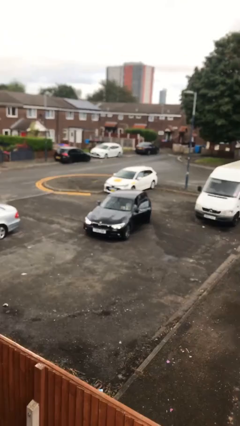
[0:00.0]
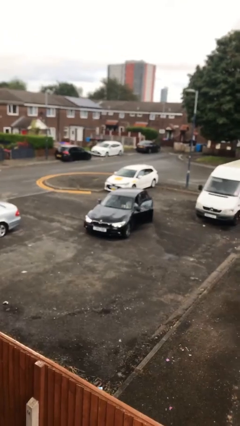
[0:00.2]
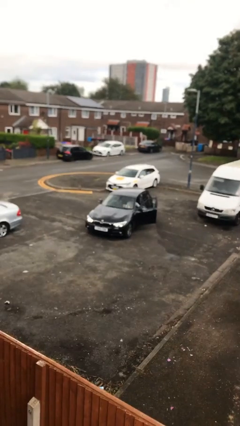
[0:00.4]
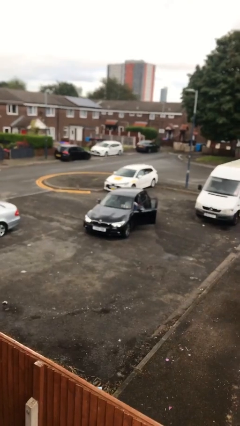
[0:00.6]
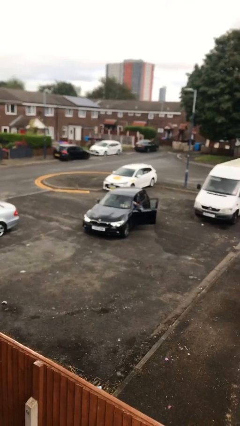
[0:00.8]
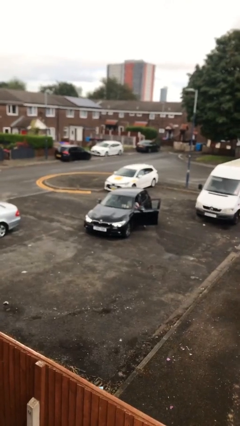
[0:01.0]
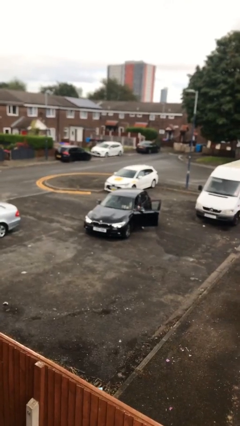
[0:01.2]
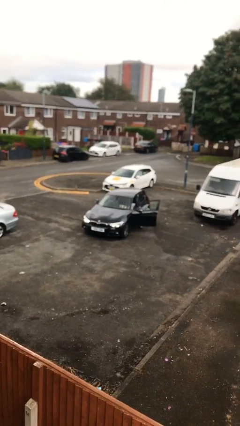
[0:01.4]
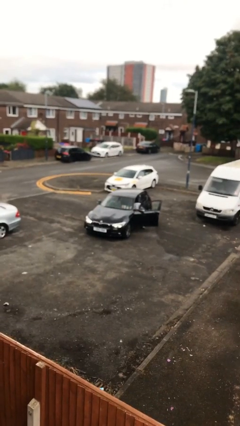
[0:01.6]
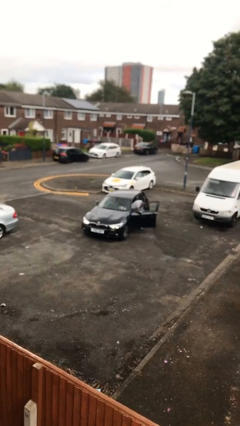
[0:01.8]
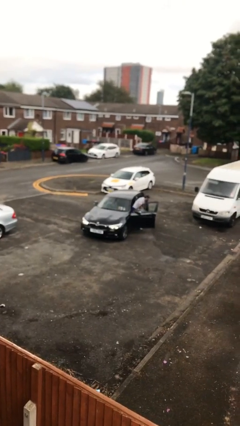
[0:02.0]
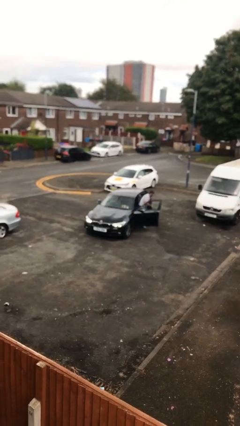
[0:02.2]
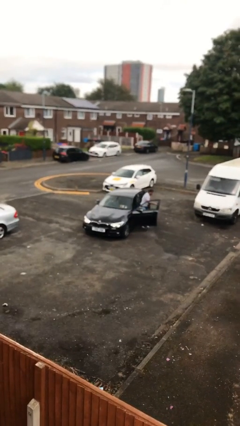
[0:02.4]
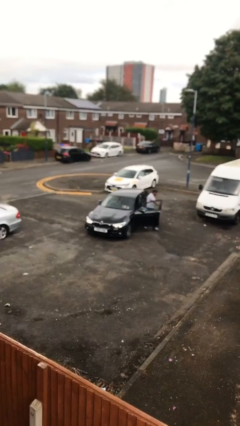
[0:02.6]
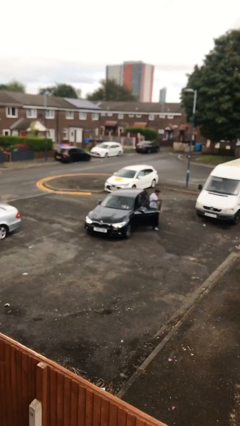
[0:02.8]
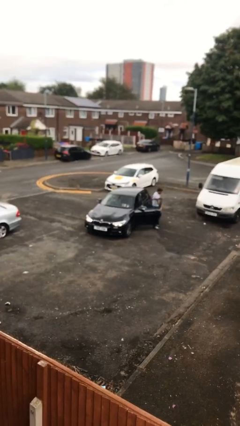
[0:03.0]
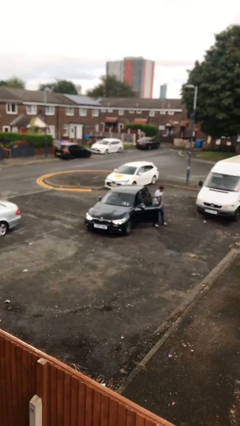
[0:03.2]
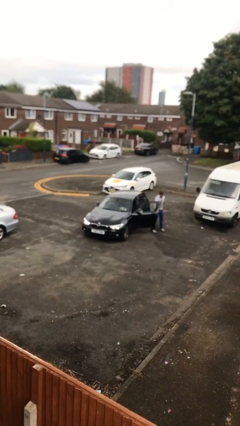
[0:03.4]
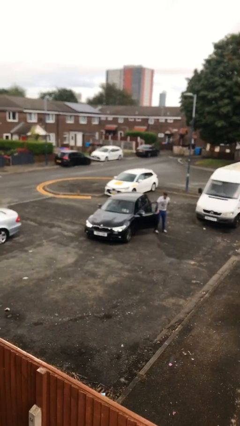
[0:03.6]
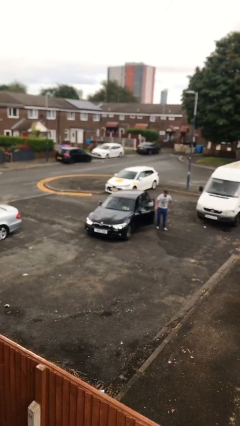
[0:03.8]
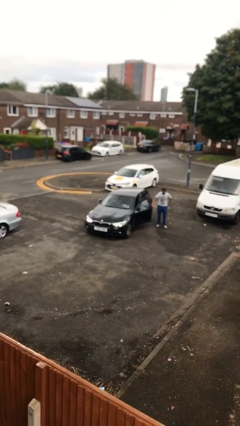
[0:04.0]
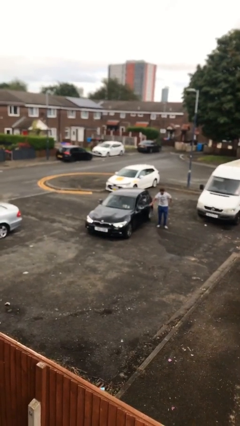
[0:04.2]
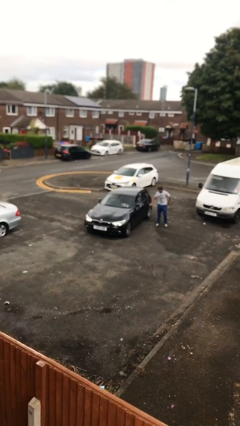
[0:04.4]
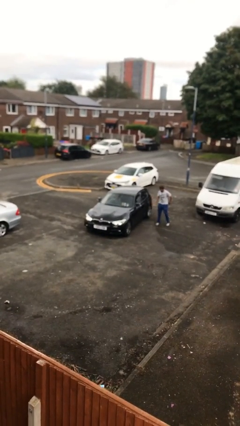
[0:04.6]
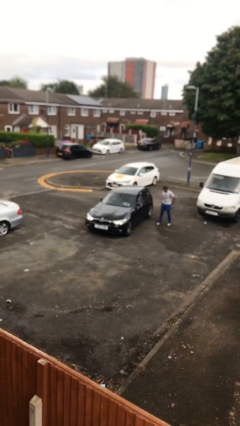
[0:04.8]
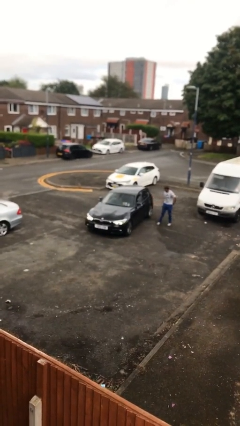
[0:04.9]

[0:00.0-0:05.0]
car drops off person

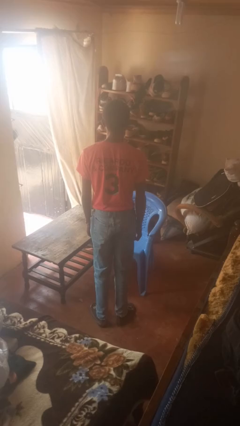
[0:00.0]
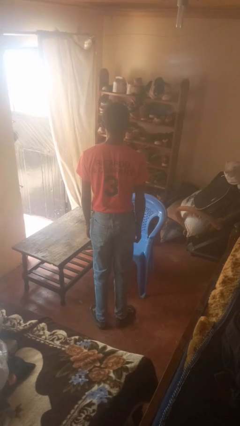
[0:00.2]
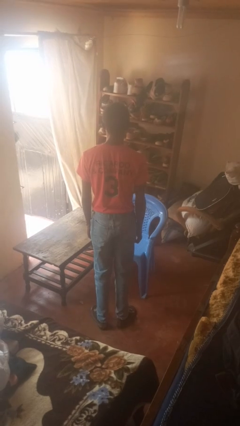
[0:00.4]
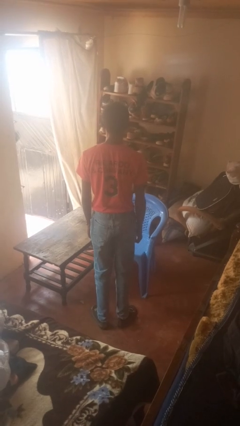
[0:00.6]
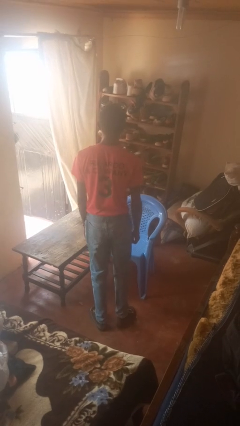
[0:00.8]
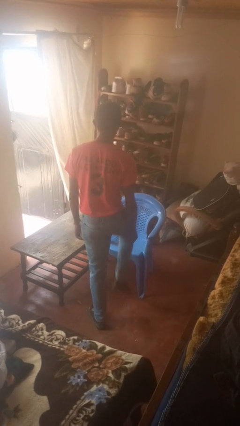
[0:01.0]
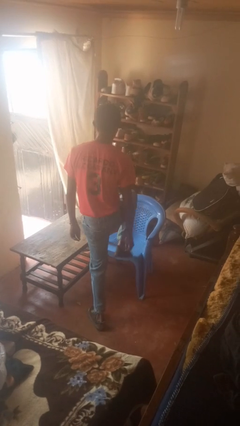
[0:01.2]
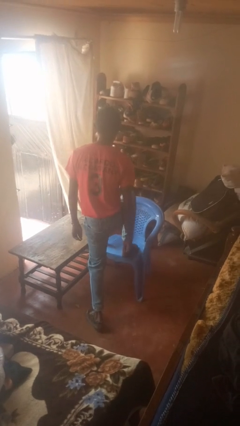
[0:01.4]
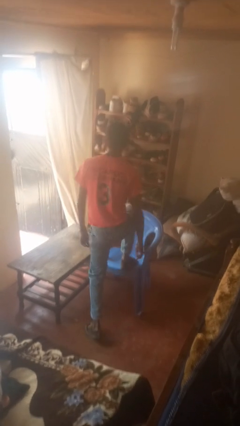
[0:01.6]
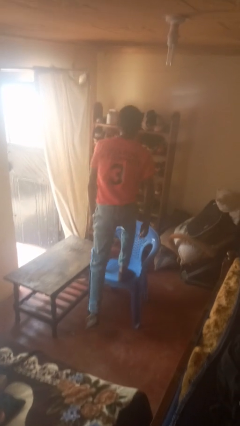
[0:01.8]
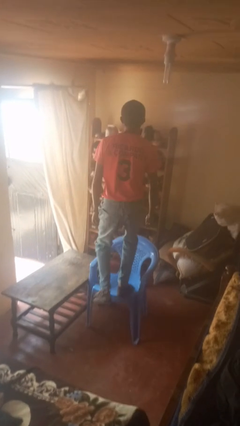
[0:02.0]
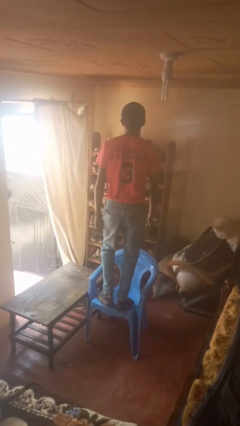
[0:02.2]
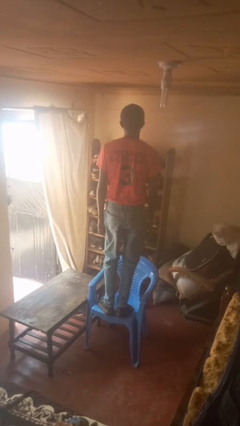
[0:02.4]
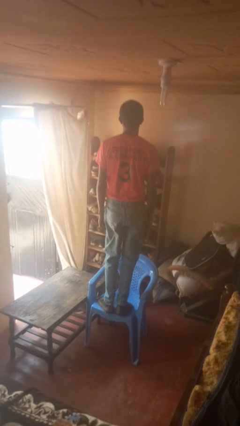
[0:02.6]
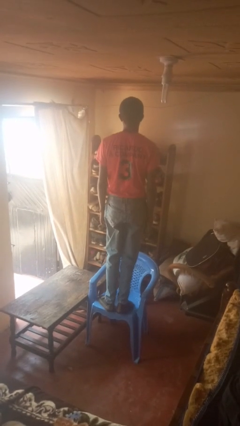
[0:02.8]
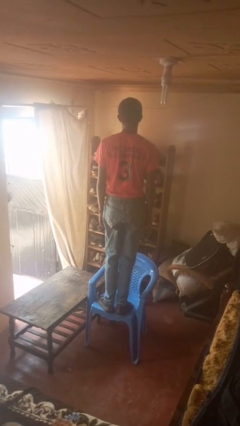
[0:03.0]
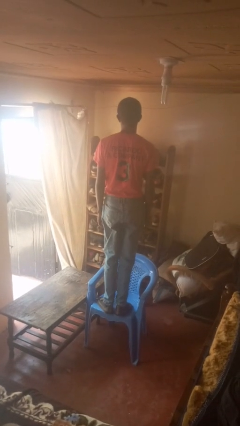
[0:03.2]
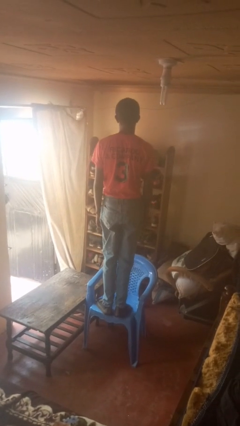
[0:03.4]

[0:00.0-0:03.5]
person climbs on chair

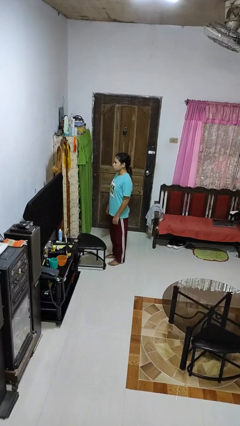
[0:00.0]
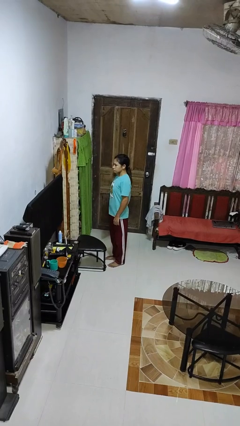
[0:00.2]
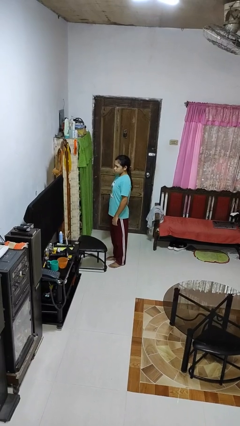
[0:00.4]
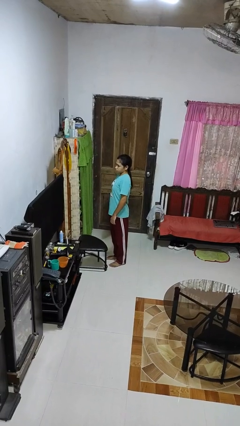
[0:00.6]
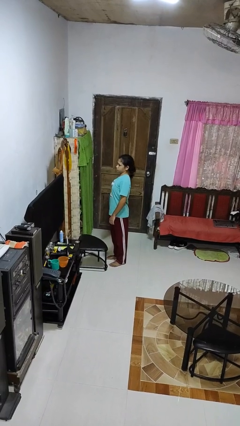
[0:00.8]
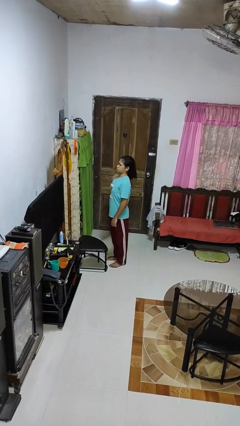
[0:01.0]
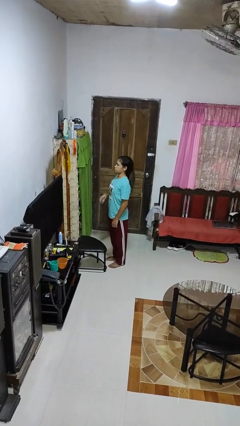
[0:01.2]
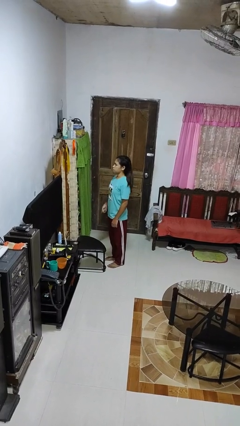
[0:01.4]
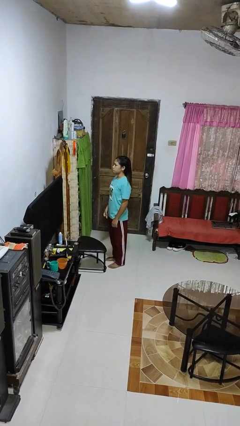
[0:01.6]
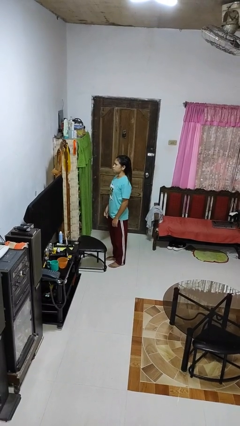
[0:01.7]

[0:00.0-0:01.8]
person takes off hairtie

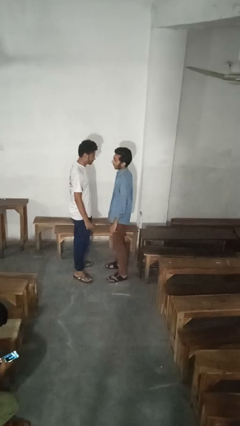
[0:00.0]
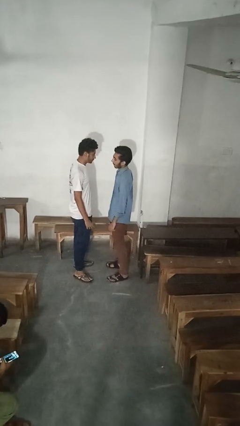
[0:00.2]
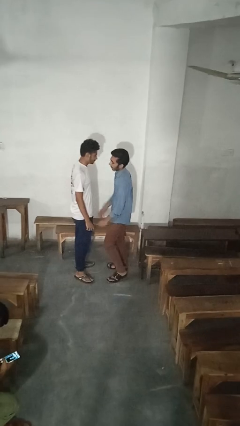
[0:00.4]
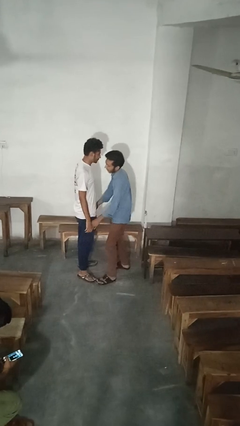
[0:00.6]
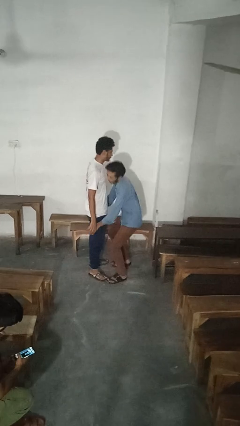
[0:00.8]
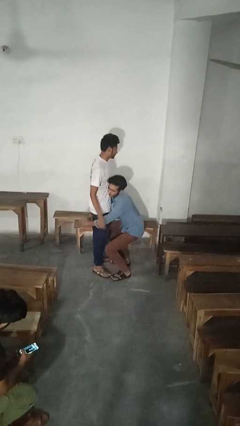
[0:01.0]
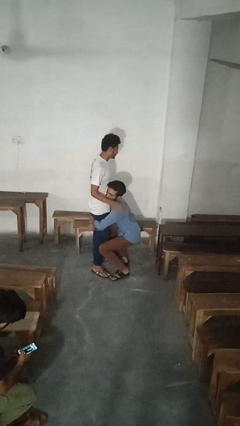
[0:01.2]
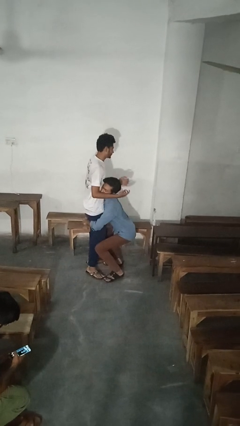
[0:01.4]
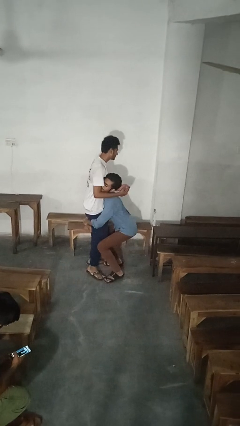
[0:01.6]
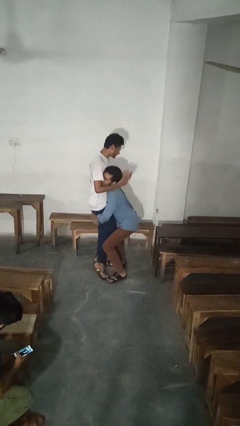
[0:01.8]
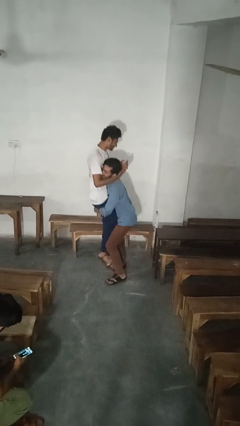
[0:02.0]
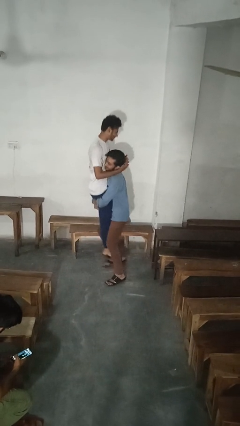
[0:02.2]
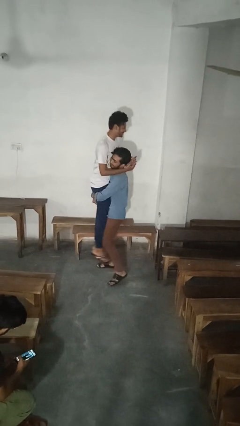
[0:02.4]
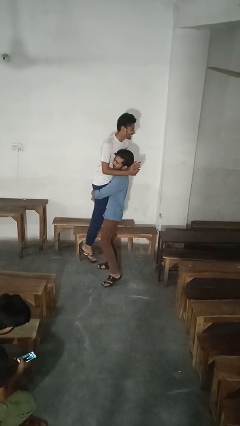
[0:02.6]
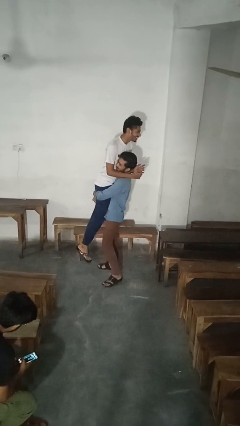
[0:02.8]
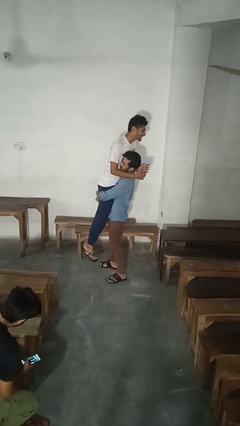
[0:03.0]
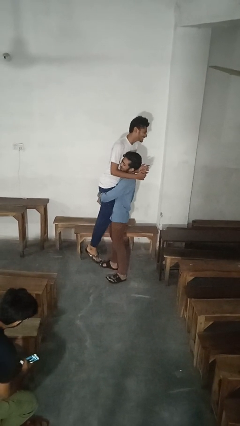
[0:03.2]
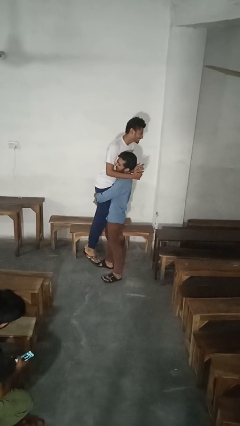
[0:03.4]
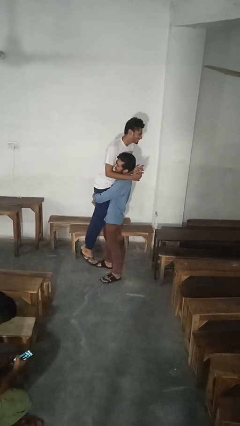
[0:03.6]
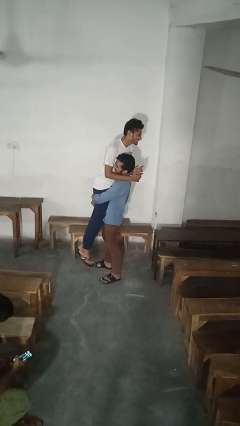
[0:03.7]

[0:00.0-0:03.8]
person picks up person

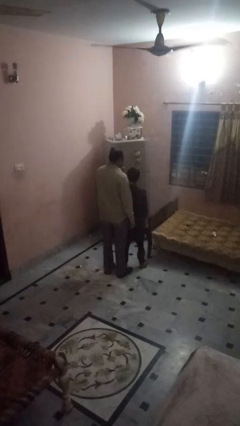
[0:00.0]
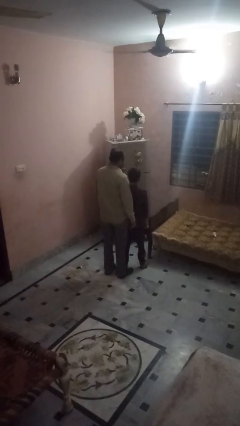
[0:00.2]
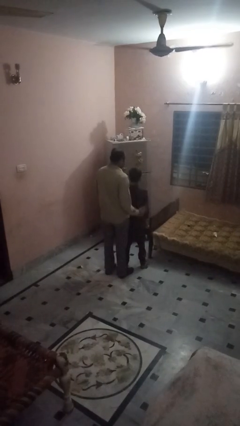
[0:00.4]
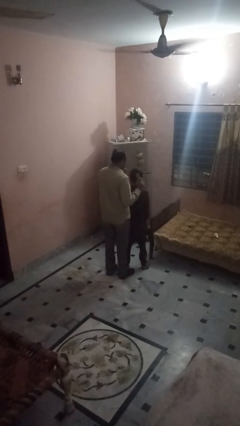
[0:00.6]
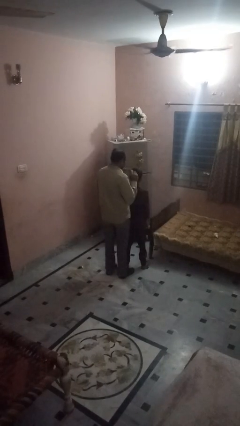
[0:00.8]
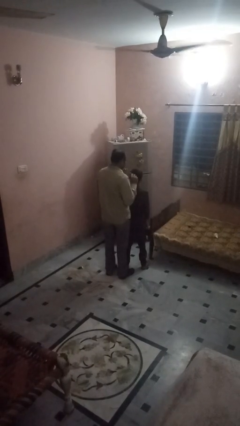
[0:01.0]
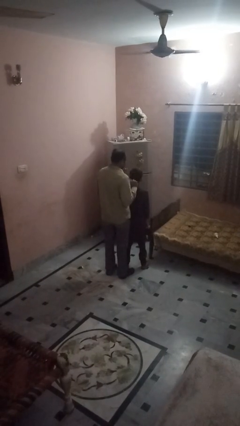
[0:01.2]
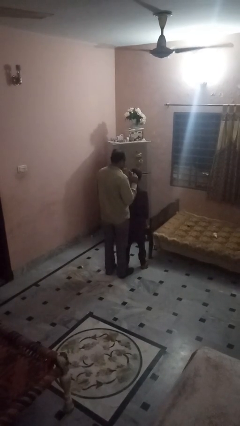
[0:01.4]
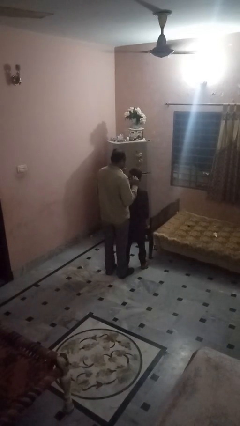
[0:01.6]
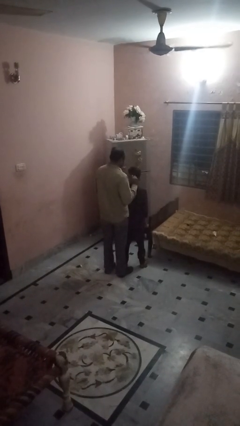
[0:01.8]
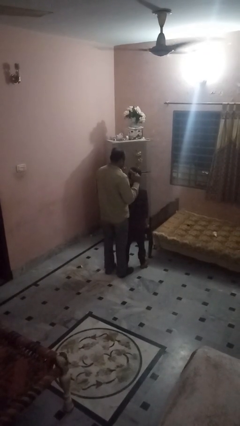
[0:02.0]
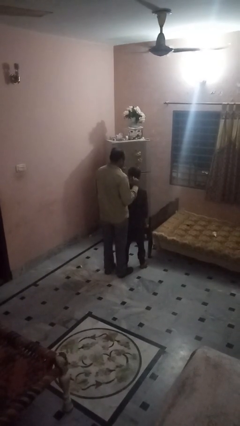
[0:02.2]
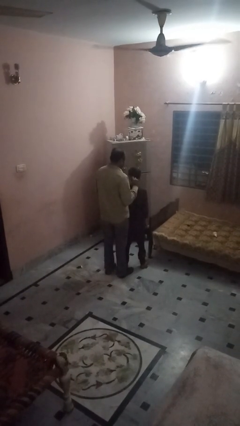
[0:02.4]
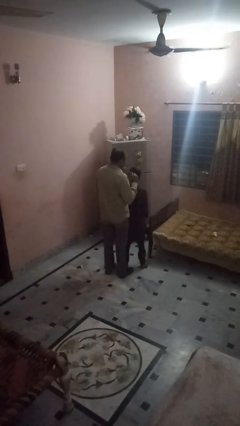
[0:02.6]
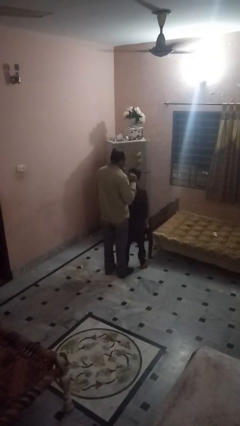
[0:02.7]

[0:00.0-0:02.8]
person brushes hair of person

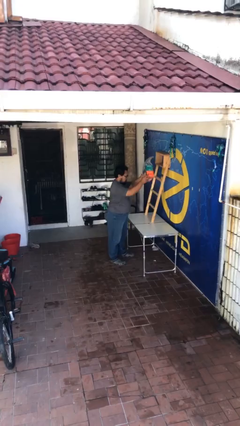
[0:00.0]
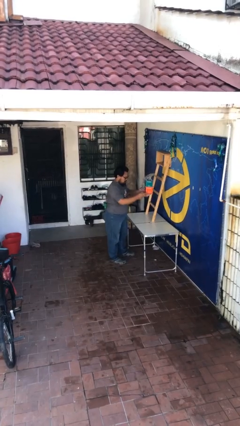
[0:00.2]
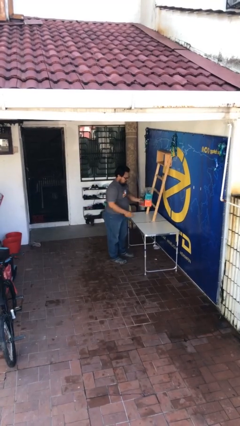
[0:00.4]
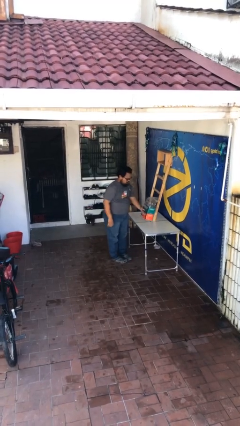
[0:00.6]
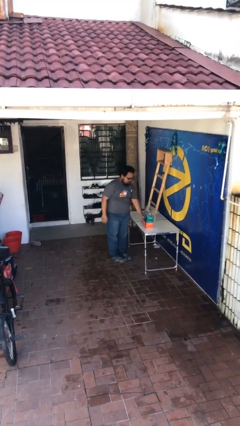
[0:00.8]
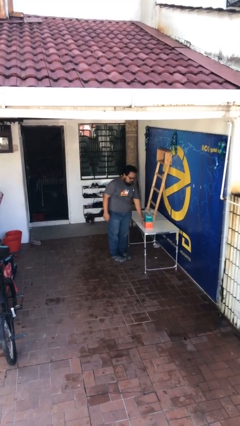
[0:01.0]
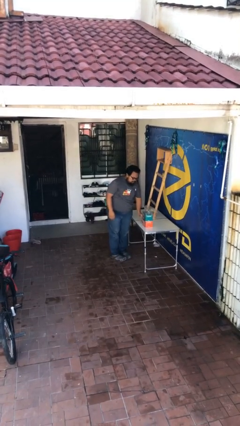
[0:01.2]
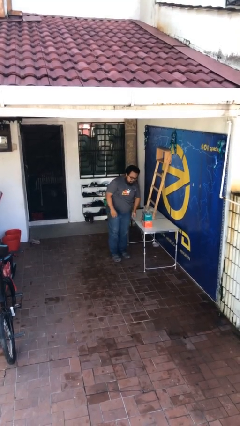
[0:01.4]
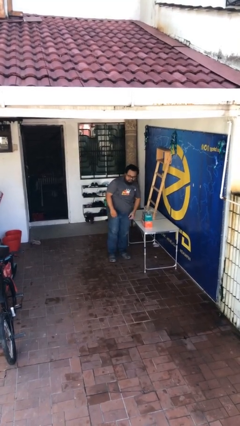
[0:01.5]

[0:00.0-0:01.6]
person puts down object on table
